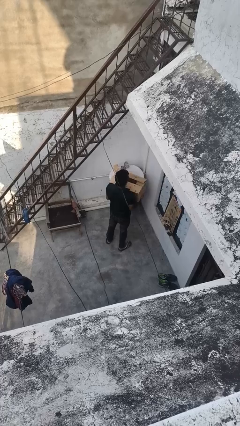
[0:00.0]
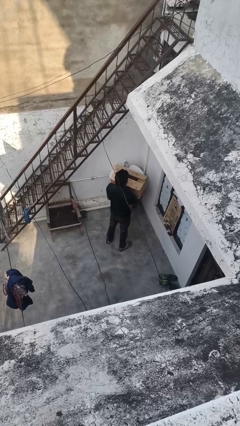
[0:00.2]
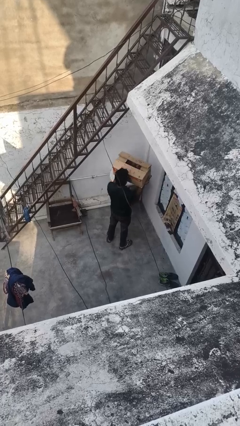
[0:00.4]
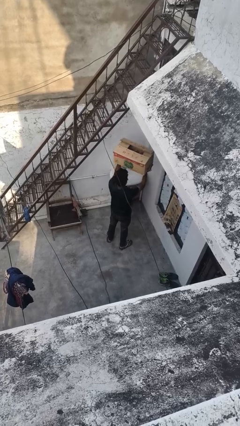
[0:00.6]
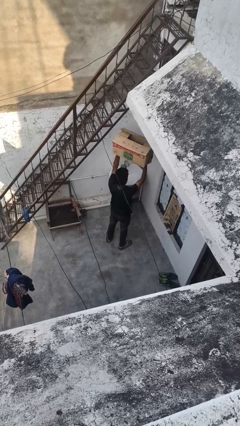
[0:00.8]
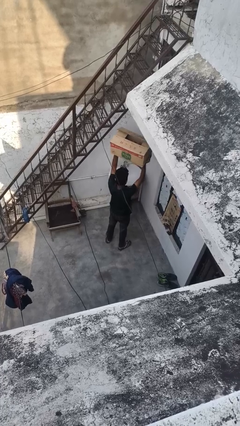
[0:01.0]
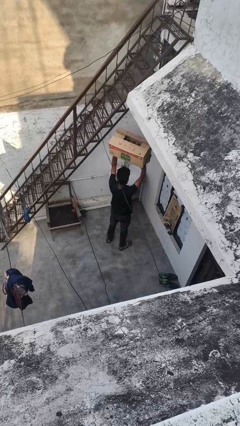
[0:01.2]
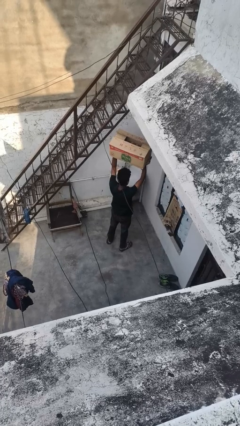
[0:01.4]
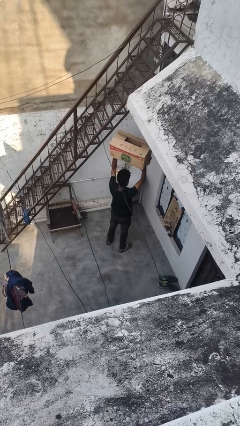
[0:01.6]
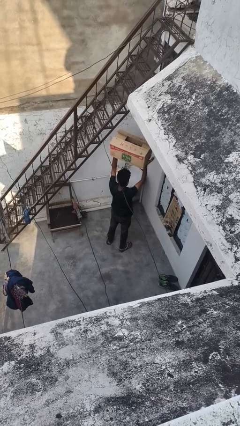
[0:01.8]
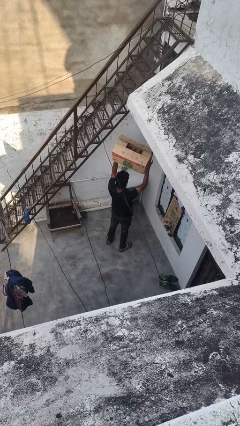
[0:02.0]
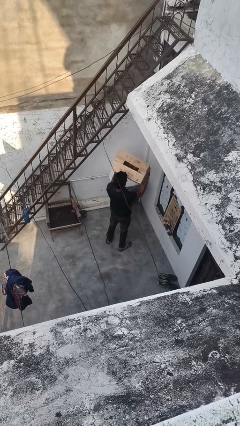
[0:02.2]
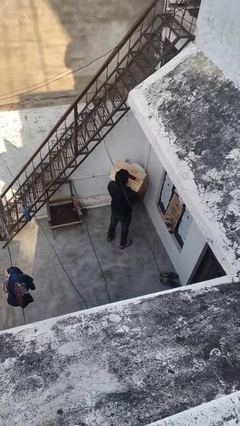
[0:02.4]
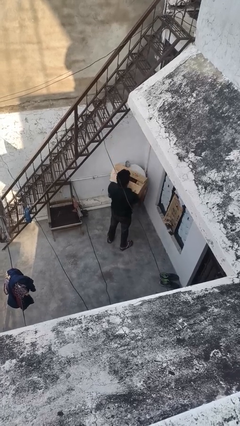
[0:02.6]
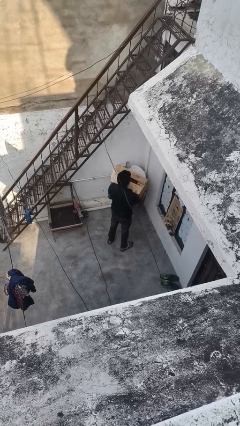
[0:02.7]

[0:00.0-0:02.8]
person holds object above head

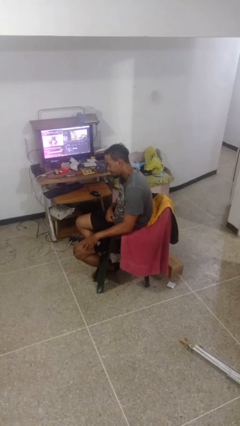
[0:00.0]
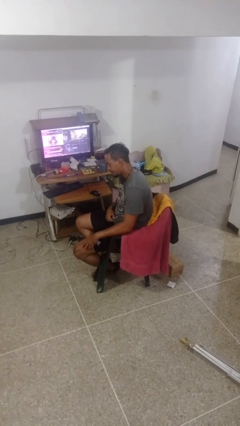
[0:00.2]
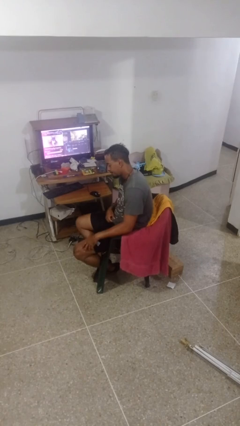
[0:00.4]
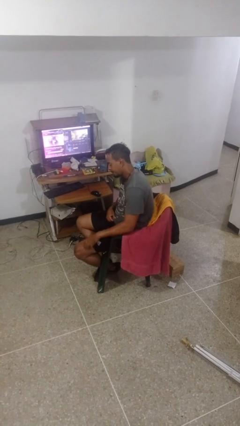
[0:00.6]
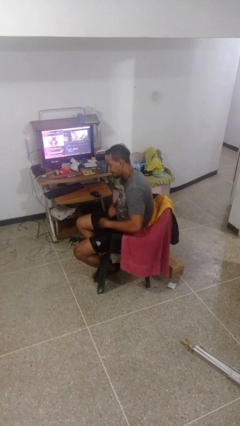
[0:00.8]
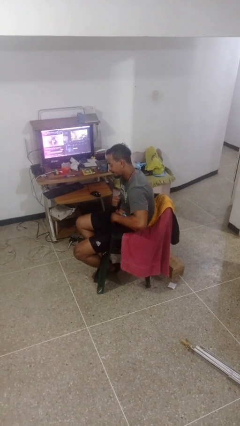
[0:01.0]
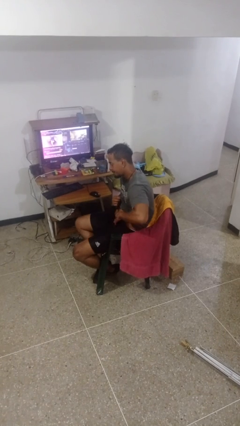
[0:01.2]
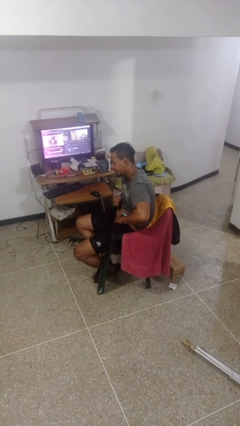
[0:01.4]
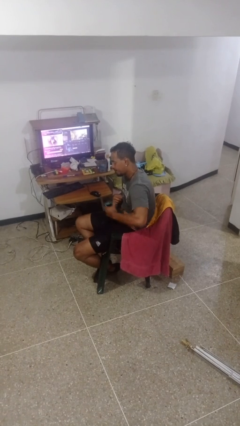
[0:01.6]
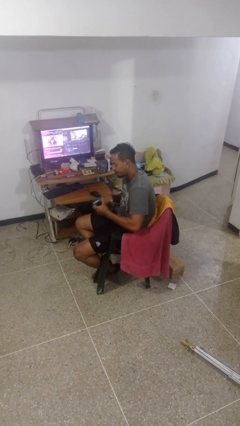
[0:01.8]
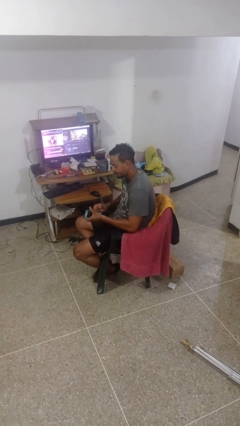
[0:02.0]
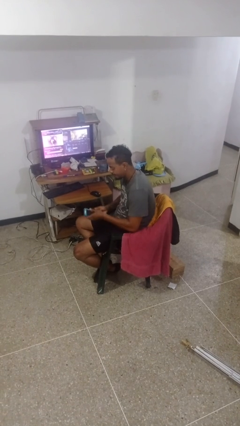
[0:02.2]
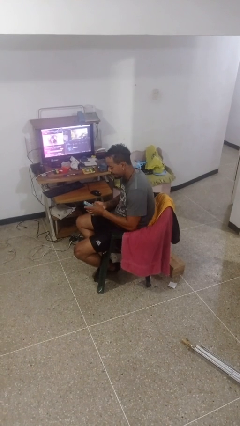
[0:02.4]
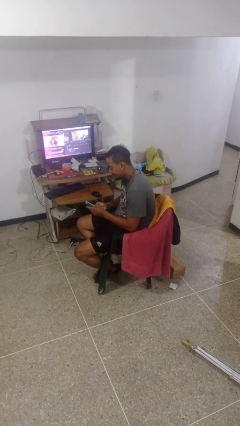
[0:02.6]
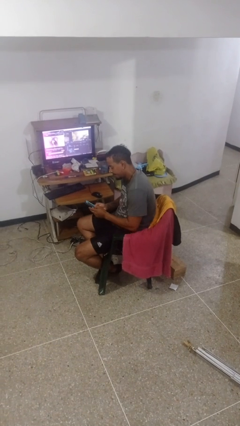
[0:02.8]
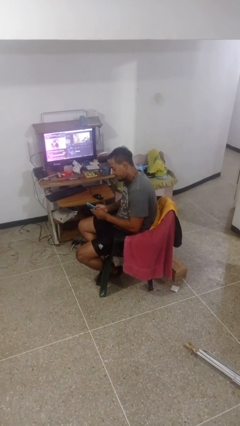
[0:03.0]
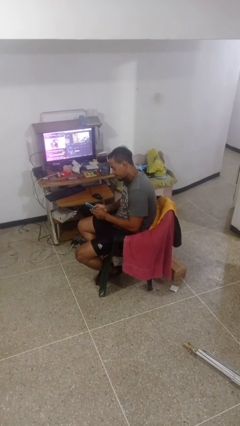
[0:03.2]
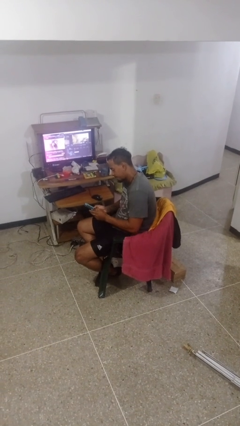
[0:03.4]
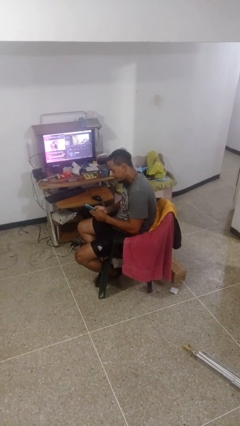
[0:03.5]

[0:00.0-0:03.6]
person takes phone from pocket

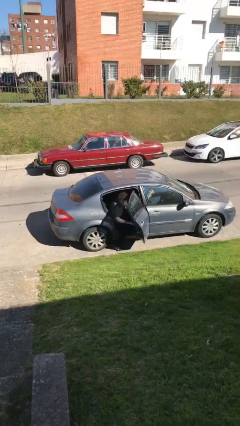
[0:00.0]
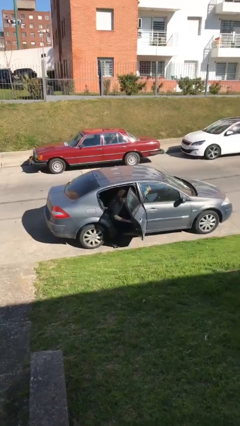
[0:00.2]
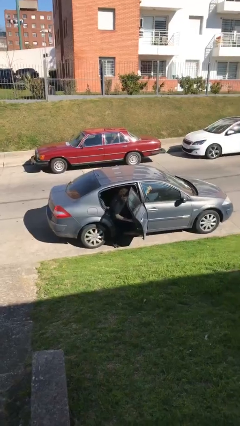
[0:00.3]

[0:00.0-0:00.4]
person opens car door

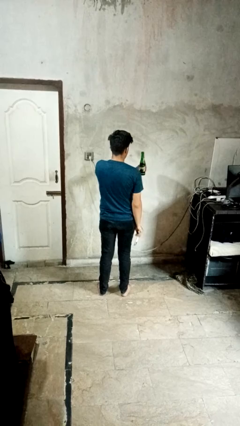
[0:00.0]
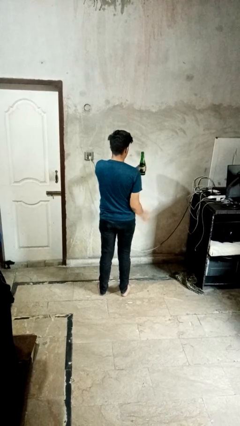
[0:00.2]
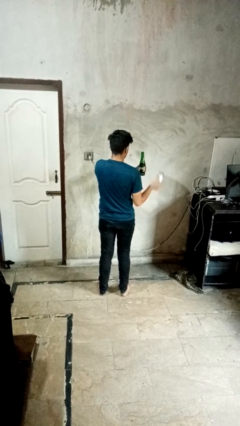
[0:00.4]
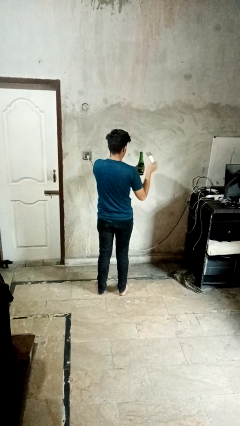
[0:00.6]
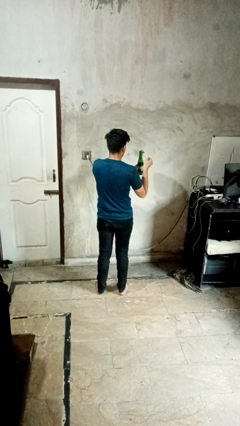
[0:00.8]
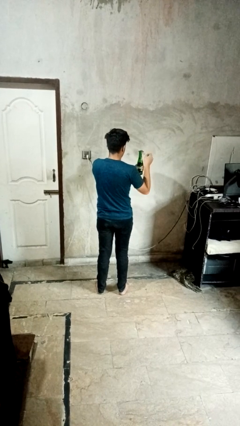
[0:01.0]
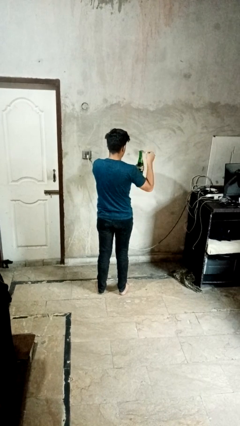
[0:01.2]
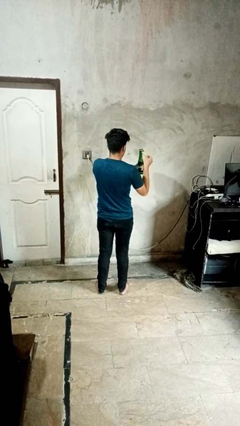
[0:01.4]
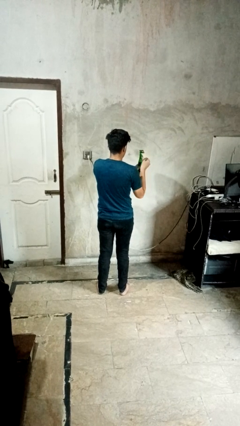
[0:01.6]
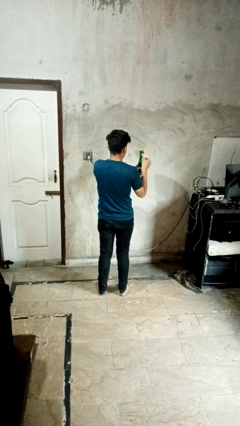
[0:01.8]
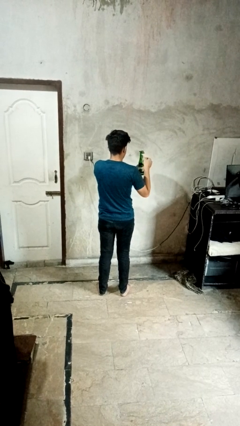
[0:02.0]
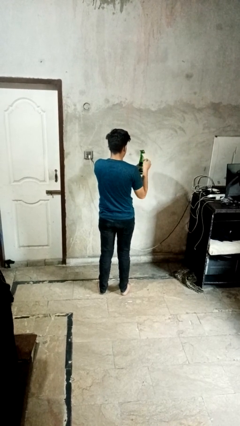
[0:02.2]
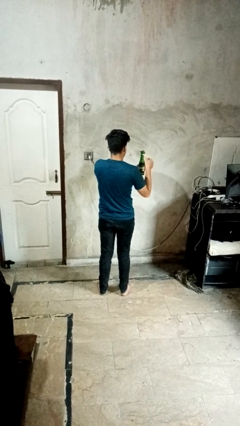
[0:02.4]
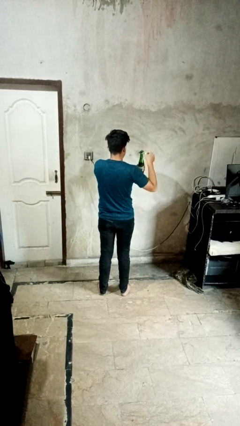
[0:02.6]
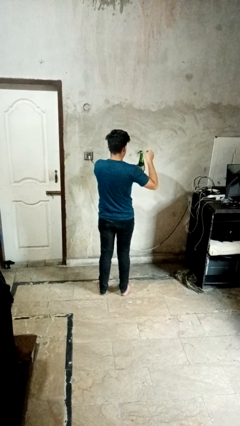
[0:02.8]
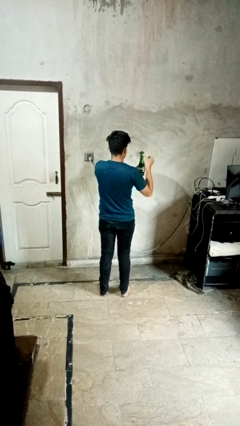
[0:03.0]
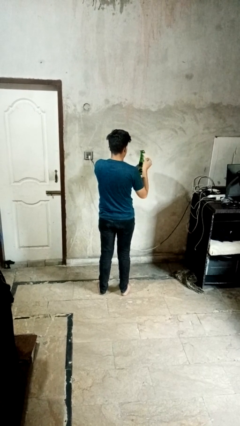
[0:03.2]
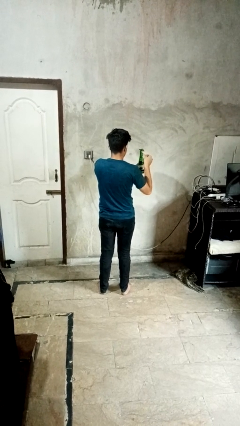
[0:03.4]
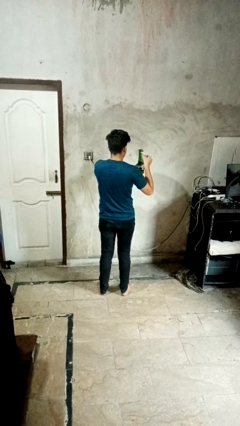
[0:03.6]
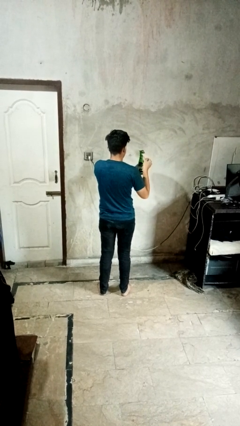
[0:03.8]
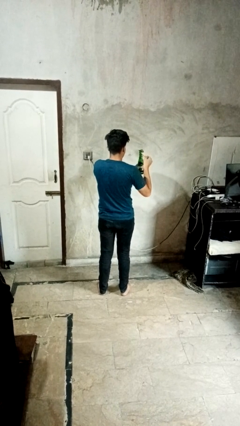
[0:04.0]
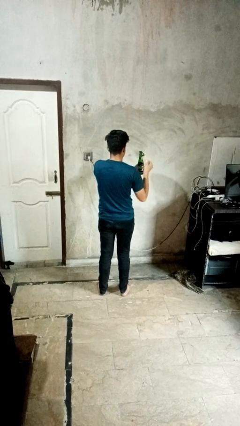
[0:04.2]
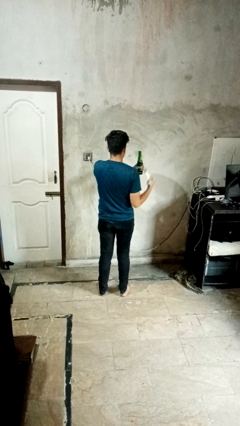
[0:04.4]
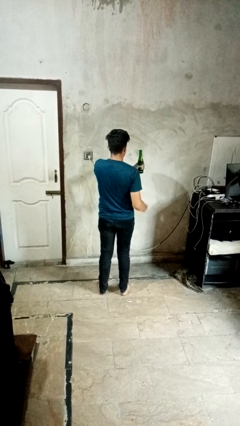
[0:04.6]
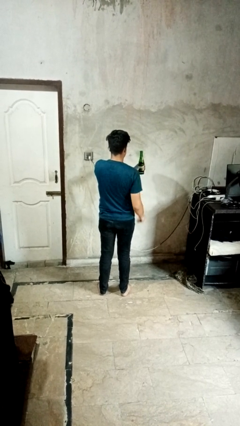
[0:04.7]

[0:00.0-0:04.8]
person opens can with can opener

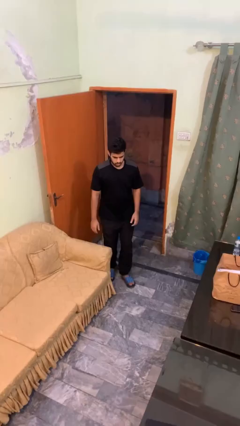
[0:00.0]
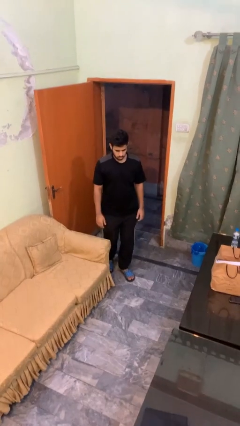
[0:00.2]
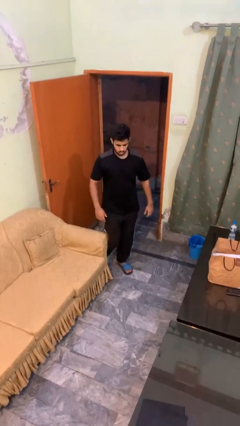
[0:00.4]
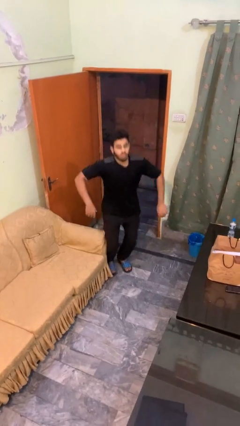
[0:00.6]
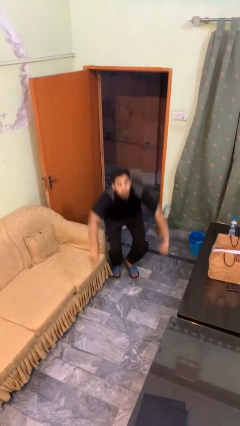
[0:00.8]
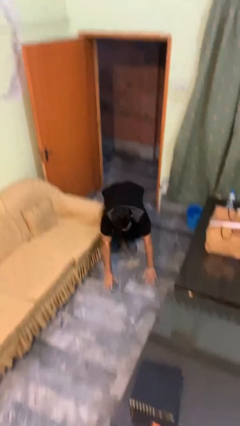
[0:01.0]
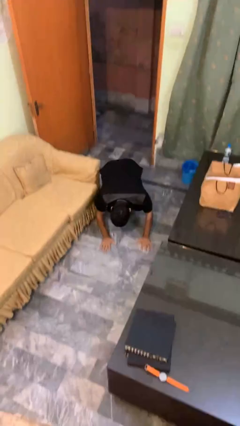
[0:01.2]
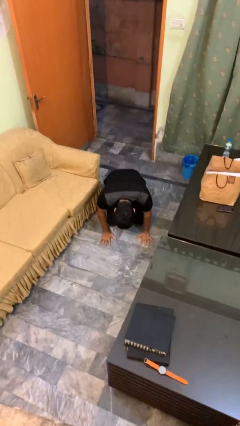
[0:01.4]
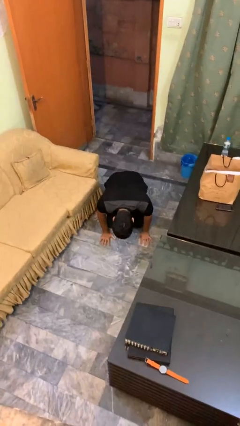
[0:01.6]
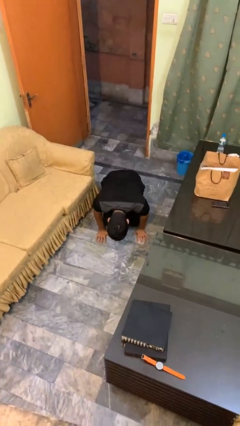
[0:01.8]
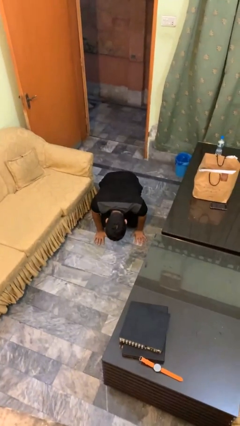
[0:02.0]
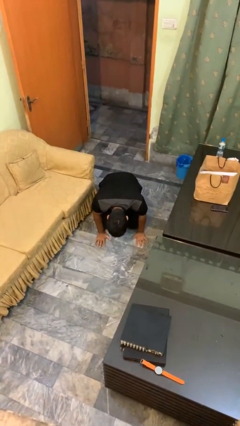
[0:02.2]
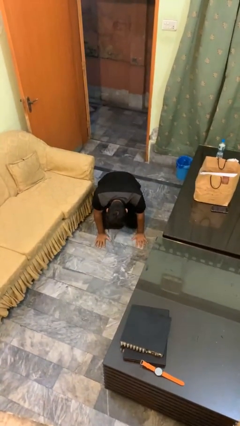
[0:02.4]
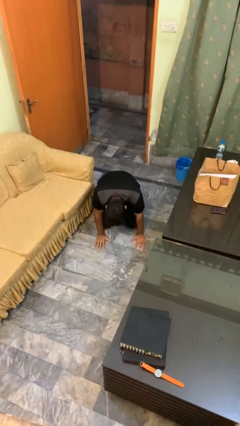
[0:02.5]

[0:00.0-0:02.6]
person trips on object on floor

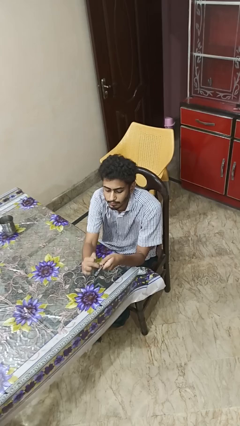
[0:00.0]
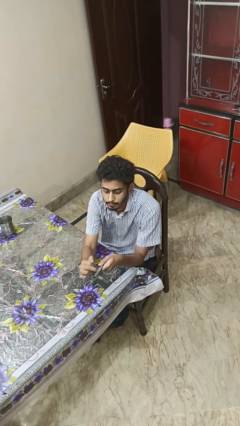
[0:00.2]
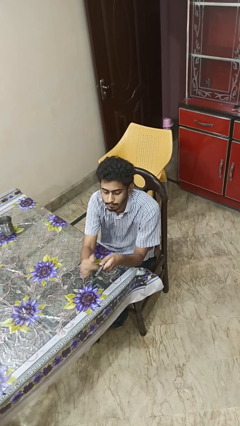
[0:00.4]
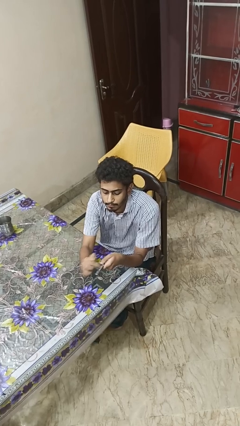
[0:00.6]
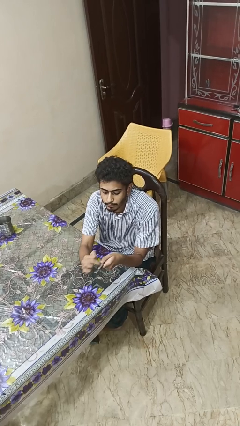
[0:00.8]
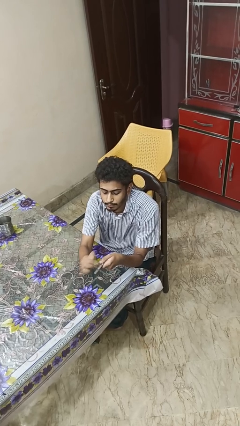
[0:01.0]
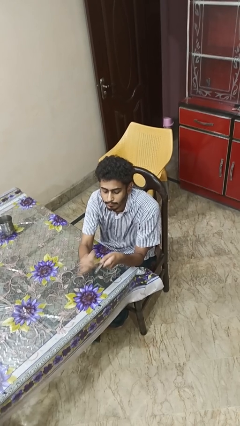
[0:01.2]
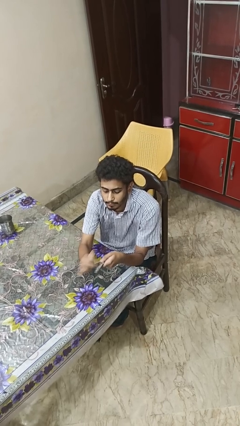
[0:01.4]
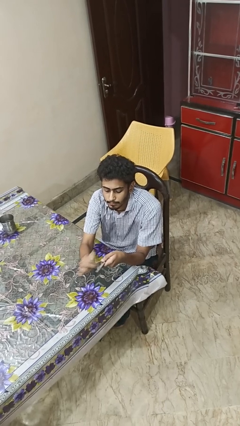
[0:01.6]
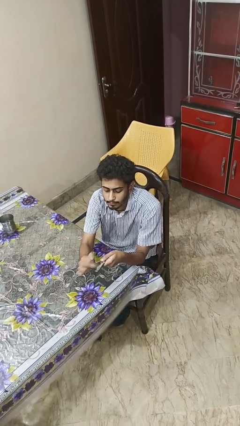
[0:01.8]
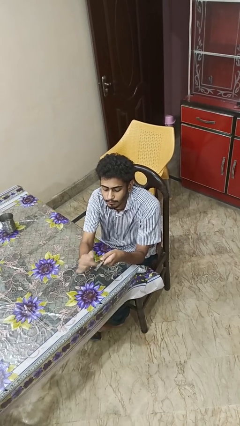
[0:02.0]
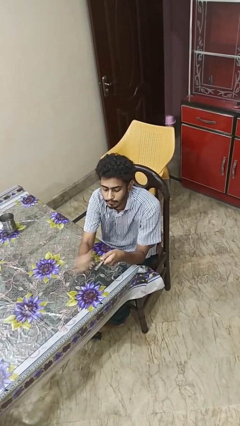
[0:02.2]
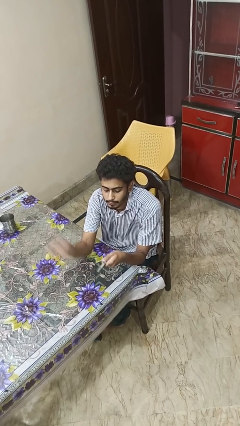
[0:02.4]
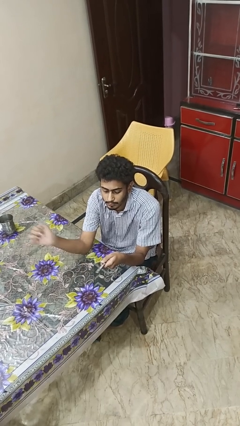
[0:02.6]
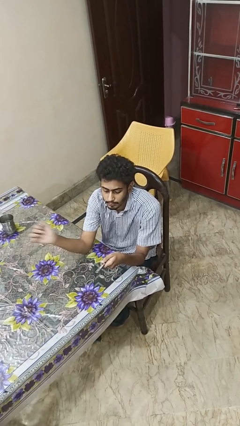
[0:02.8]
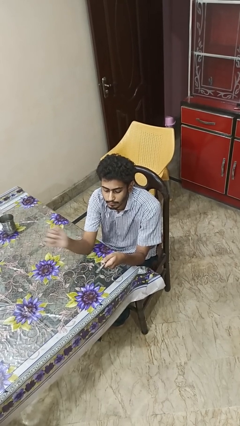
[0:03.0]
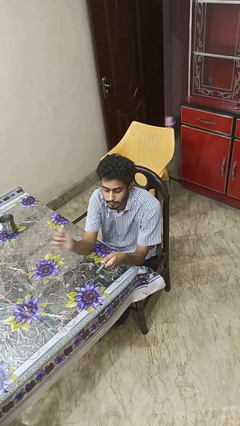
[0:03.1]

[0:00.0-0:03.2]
person files fingernails

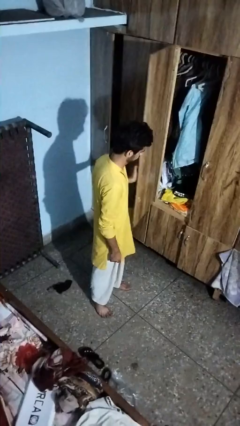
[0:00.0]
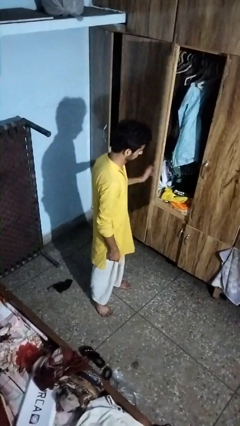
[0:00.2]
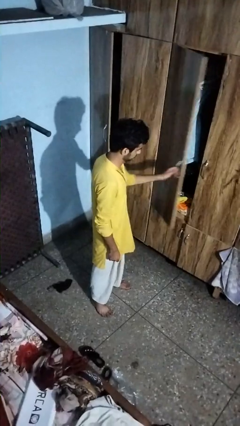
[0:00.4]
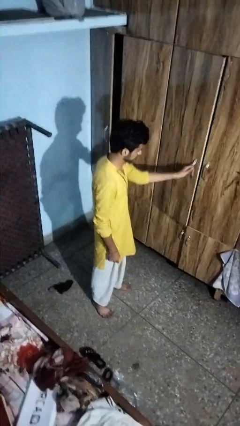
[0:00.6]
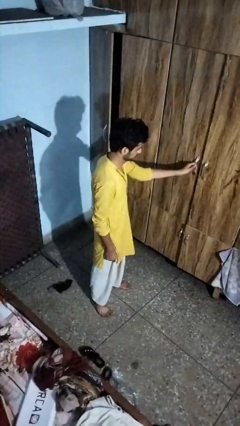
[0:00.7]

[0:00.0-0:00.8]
person closes closet door
